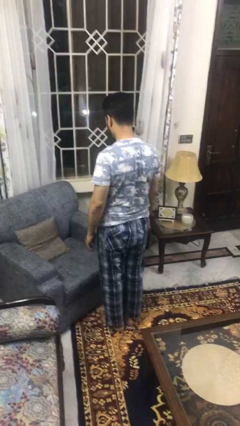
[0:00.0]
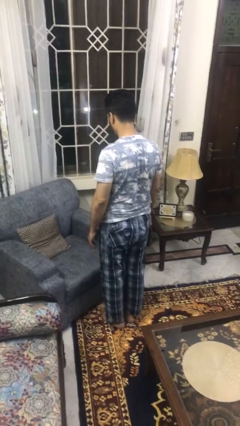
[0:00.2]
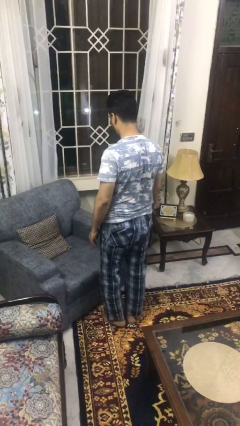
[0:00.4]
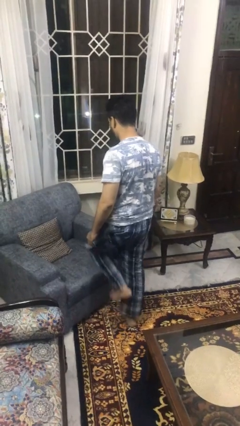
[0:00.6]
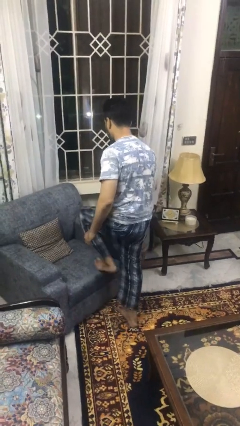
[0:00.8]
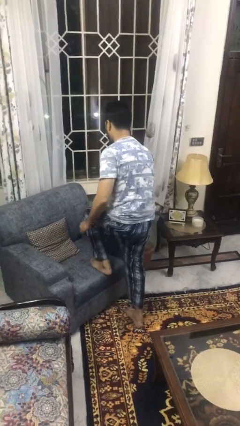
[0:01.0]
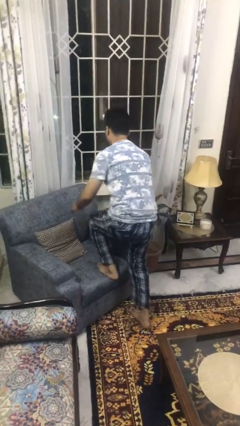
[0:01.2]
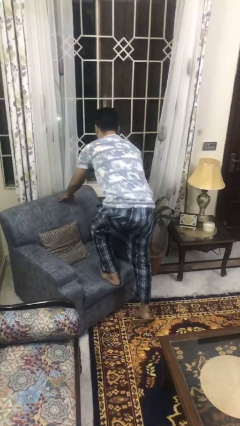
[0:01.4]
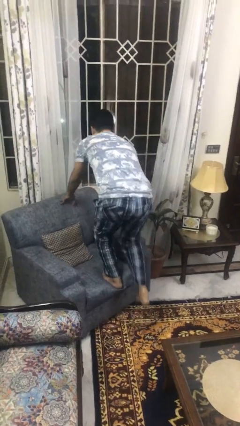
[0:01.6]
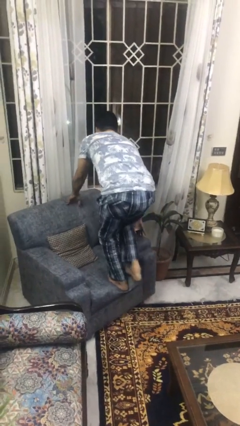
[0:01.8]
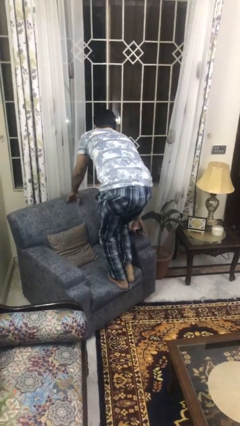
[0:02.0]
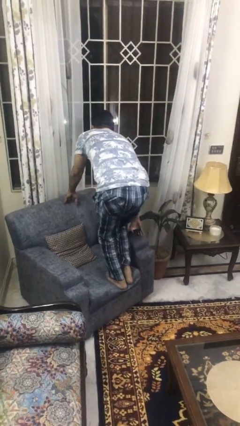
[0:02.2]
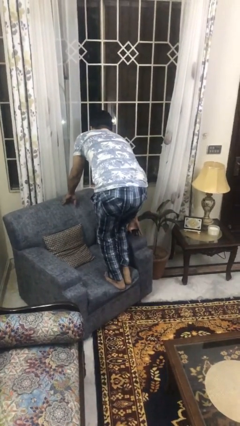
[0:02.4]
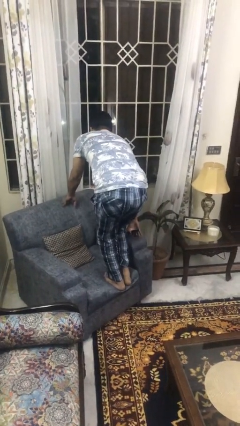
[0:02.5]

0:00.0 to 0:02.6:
person climbs on couch

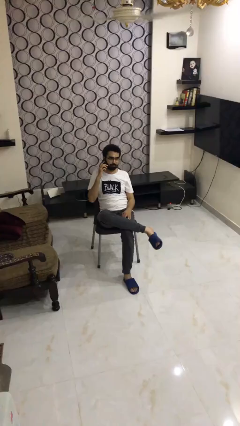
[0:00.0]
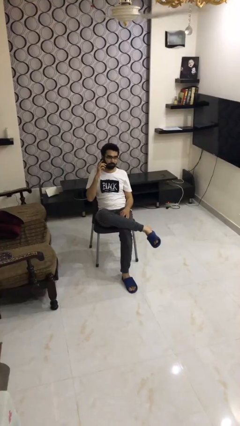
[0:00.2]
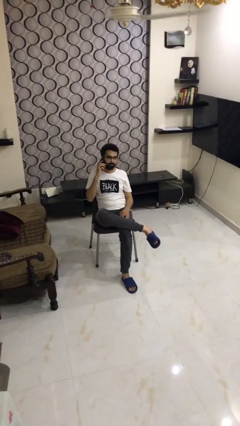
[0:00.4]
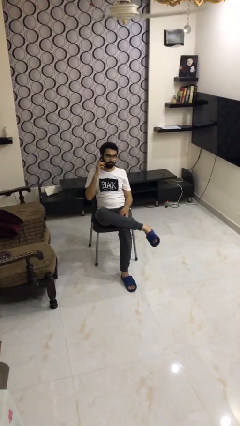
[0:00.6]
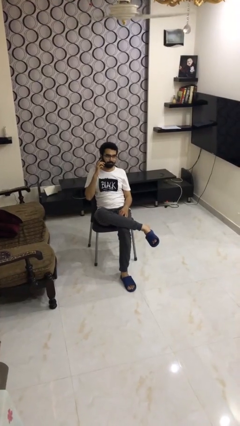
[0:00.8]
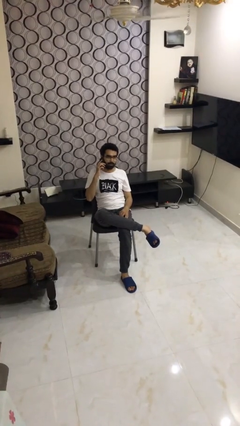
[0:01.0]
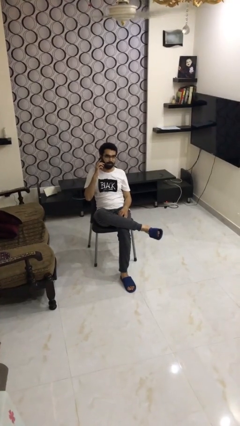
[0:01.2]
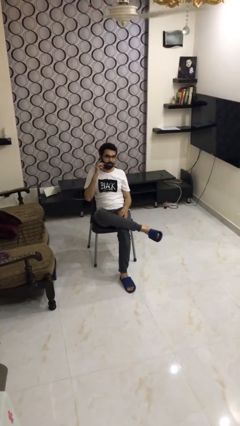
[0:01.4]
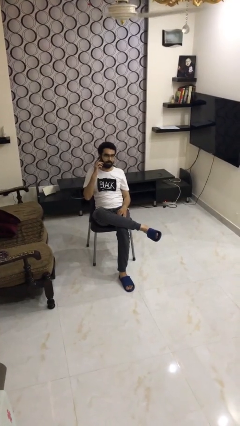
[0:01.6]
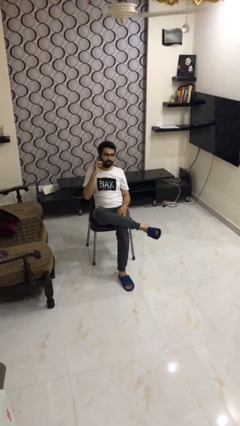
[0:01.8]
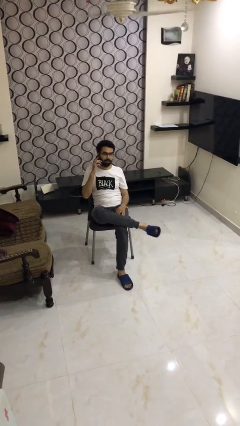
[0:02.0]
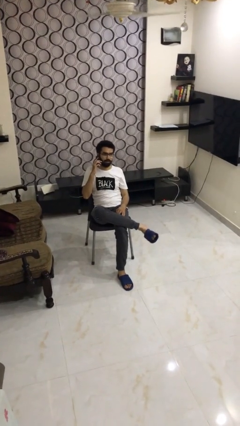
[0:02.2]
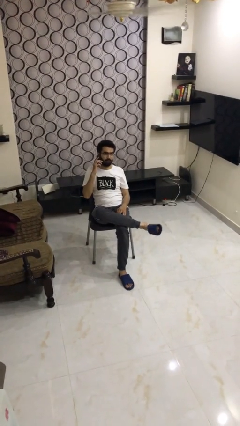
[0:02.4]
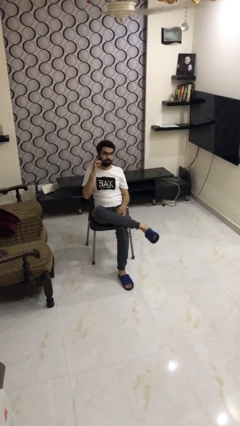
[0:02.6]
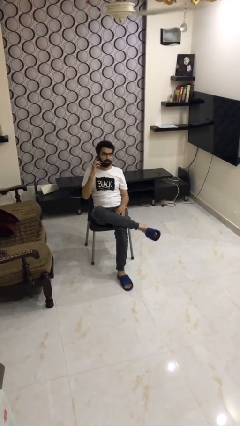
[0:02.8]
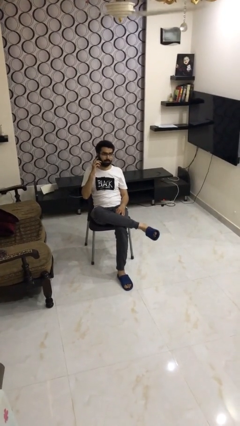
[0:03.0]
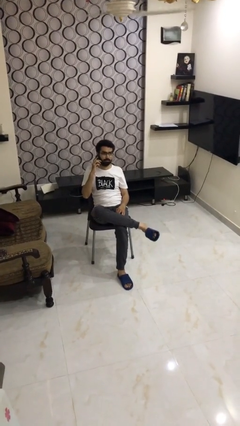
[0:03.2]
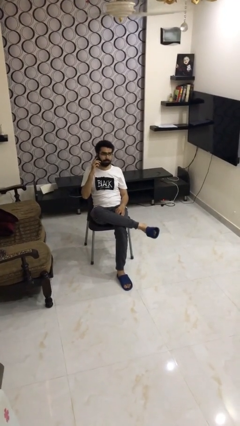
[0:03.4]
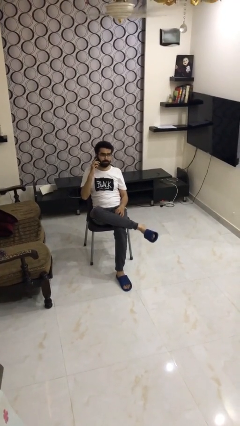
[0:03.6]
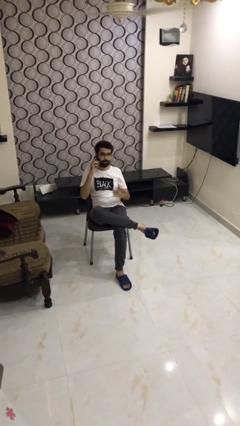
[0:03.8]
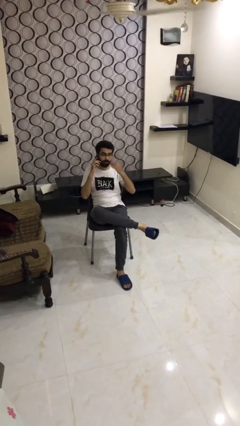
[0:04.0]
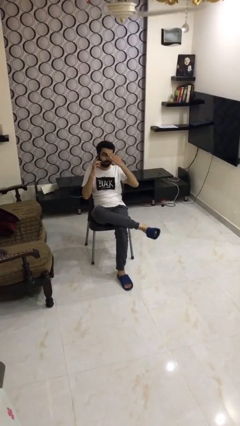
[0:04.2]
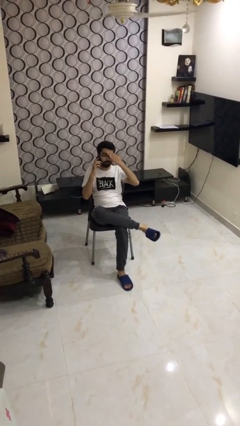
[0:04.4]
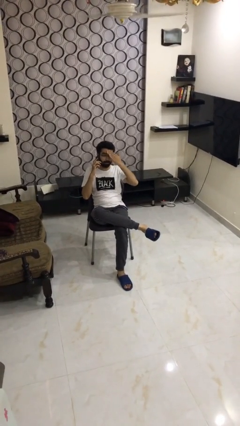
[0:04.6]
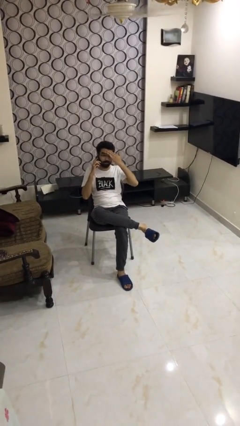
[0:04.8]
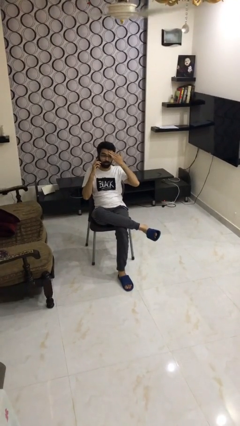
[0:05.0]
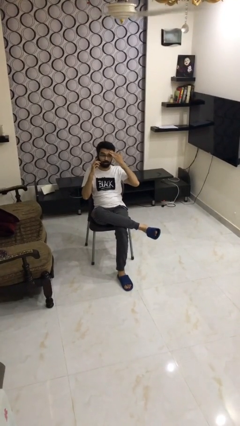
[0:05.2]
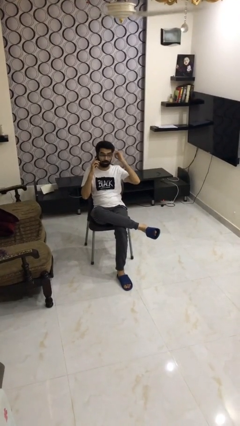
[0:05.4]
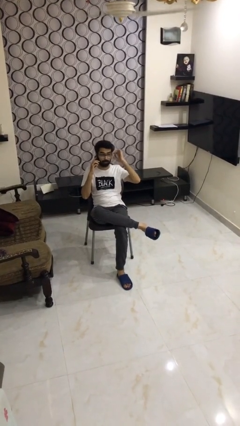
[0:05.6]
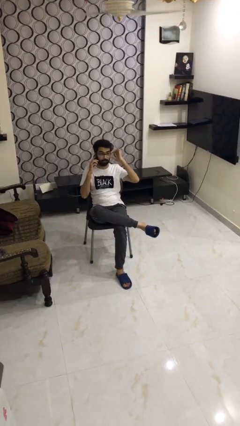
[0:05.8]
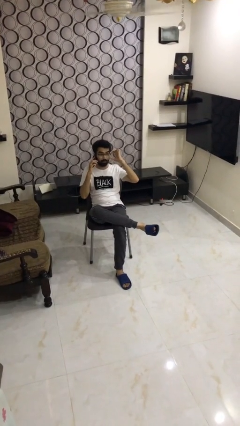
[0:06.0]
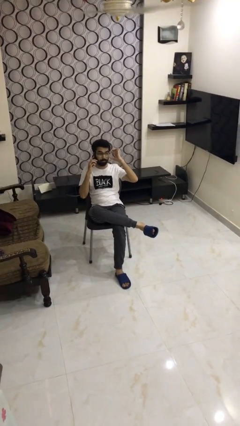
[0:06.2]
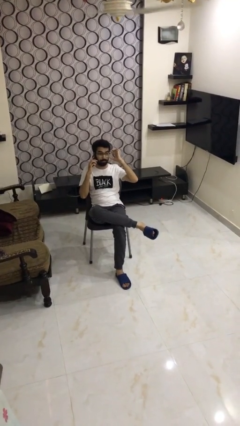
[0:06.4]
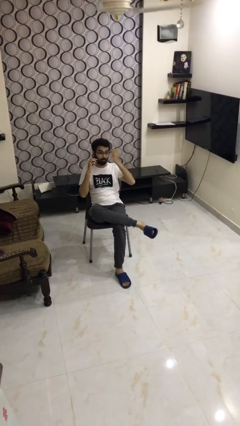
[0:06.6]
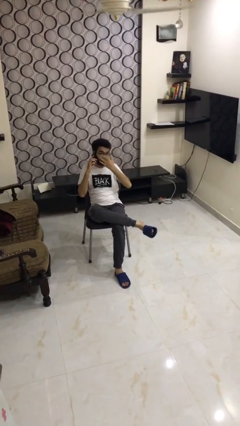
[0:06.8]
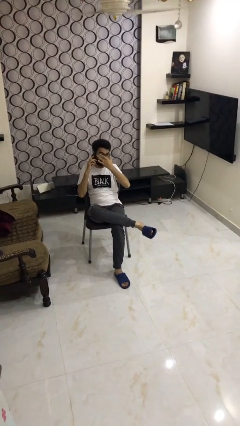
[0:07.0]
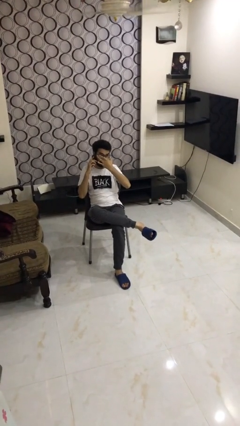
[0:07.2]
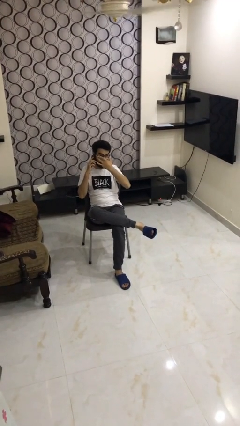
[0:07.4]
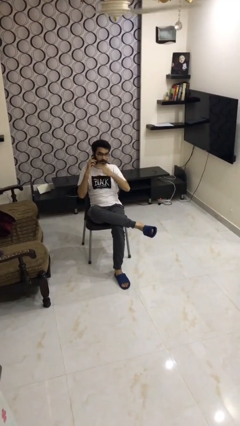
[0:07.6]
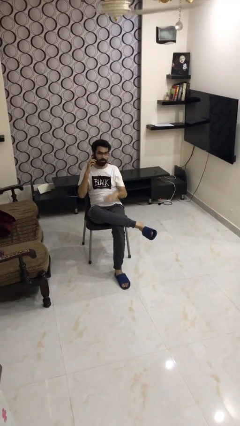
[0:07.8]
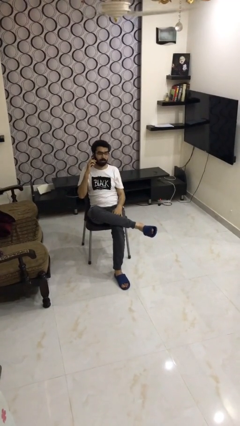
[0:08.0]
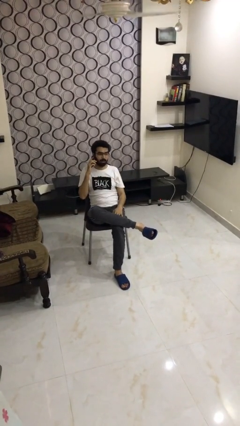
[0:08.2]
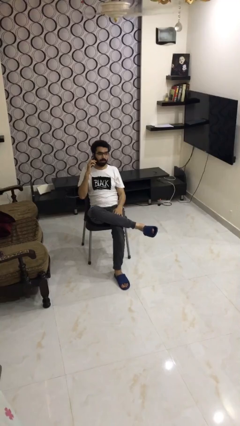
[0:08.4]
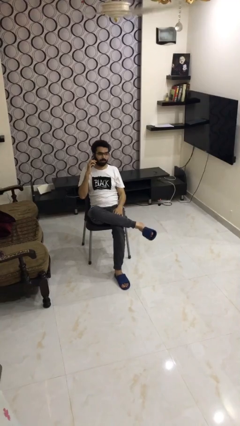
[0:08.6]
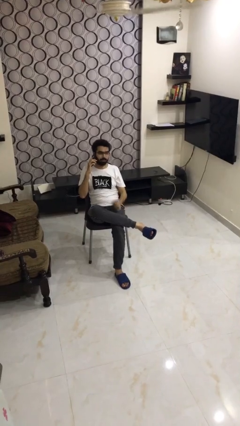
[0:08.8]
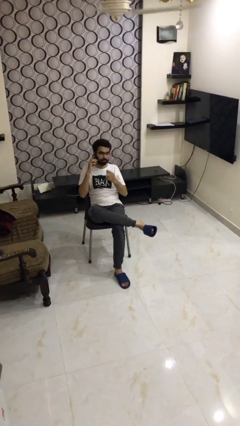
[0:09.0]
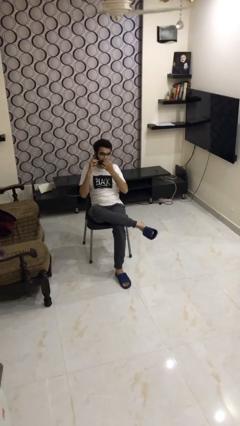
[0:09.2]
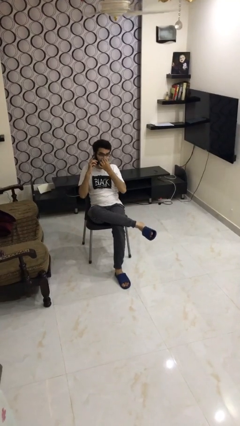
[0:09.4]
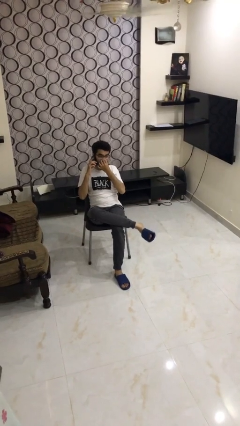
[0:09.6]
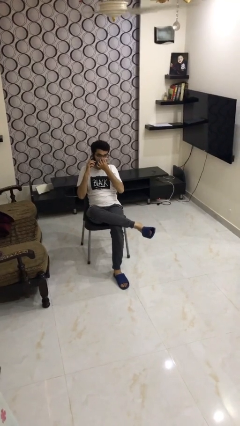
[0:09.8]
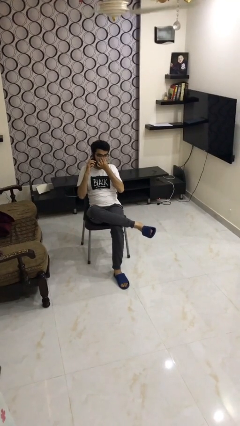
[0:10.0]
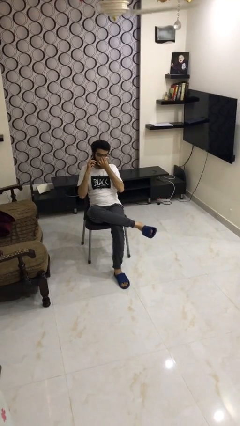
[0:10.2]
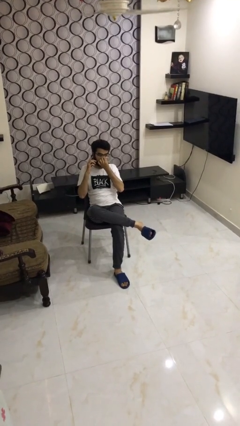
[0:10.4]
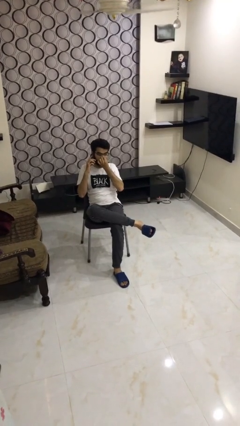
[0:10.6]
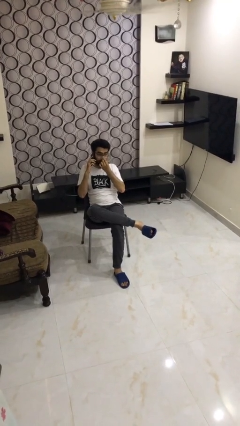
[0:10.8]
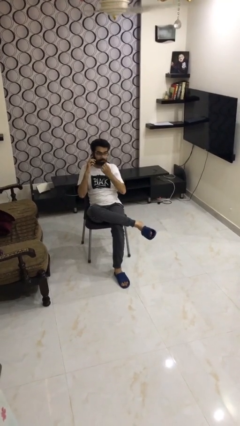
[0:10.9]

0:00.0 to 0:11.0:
person talks on phone

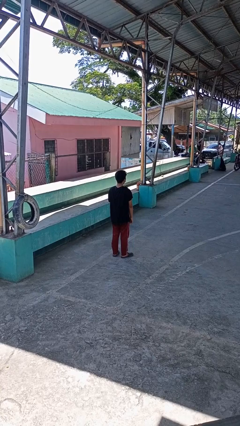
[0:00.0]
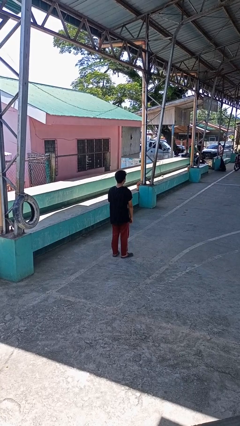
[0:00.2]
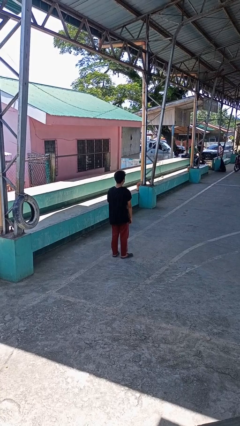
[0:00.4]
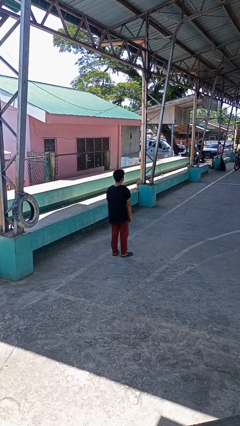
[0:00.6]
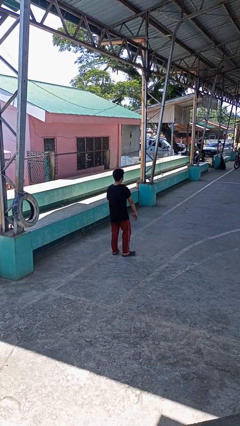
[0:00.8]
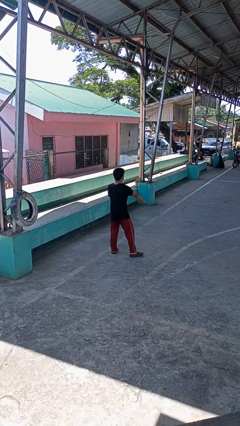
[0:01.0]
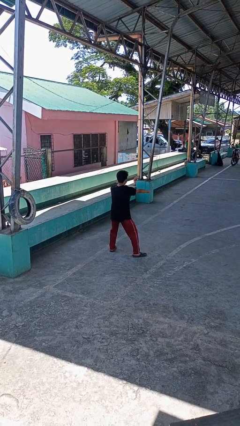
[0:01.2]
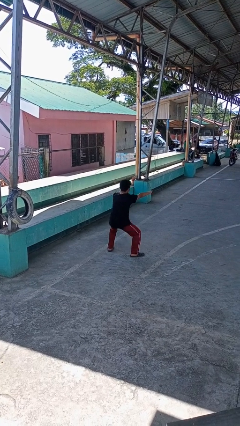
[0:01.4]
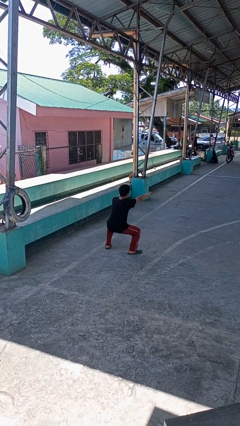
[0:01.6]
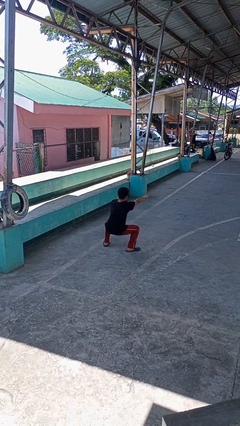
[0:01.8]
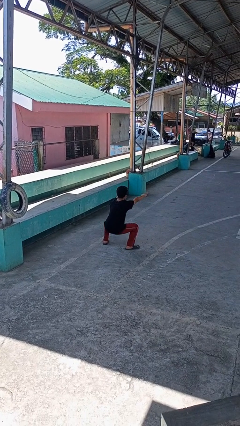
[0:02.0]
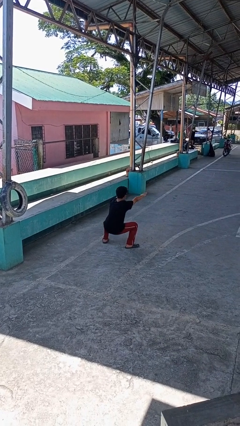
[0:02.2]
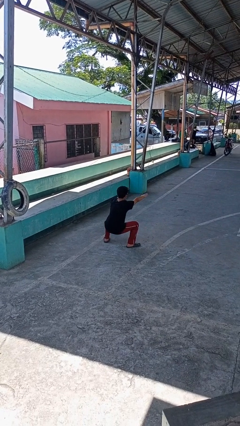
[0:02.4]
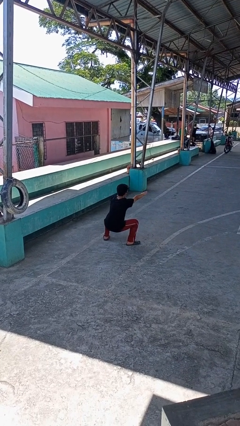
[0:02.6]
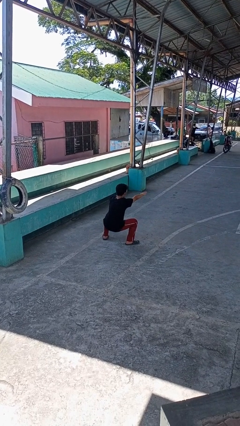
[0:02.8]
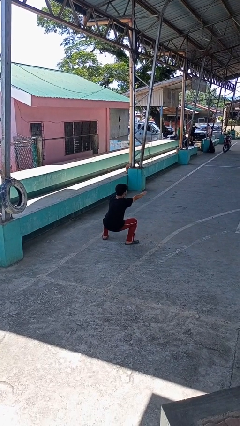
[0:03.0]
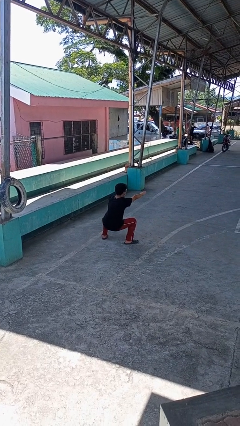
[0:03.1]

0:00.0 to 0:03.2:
person squats

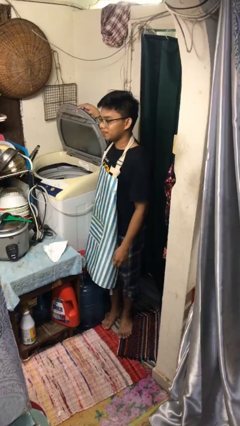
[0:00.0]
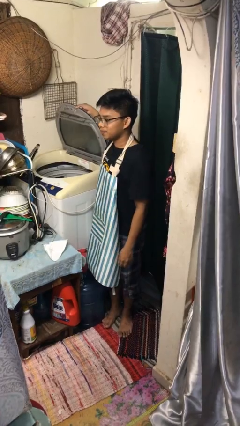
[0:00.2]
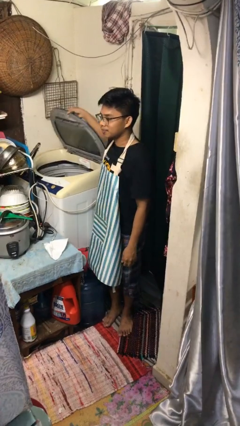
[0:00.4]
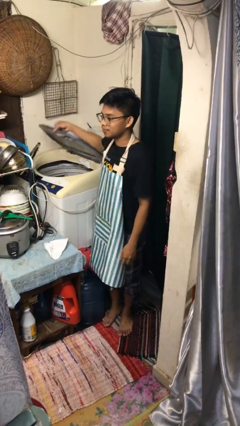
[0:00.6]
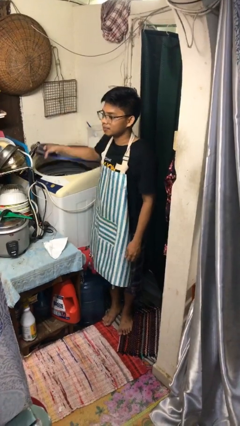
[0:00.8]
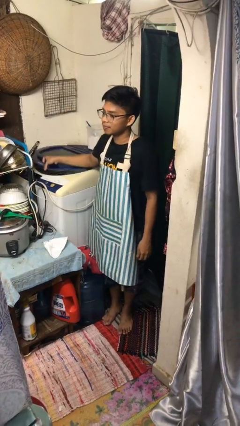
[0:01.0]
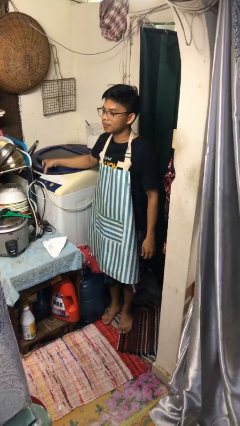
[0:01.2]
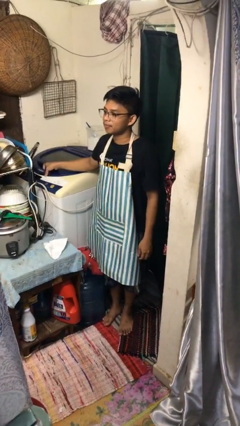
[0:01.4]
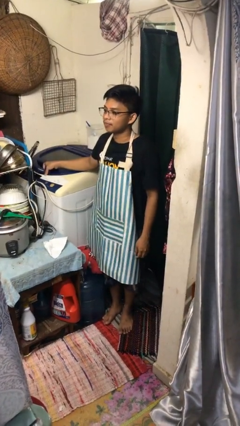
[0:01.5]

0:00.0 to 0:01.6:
person closes clothes washer
